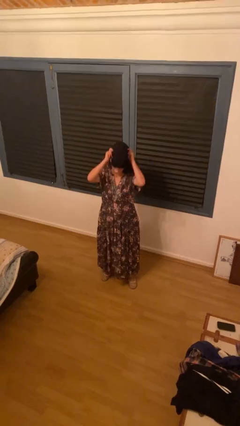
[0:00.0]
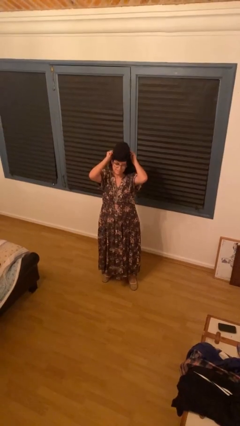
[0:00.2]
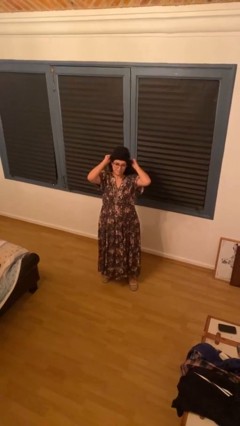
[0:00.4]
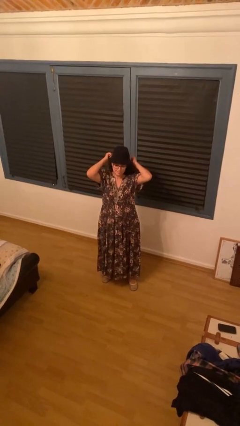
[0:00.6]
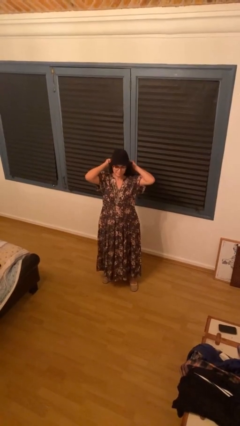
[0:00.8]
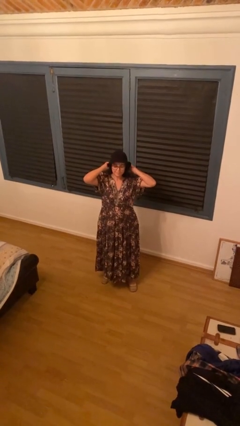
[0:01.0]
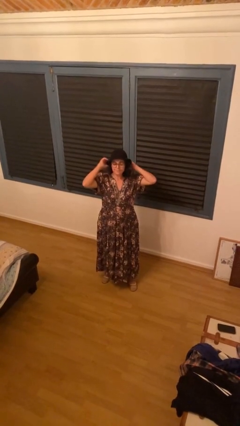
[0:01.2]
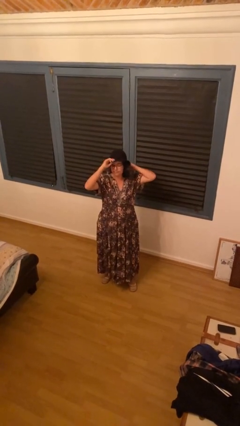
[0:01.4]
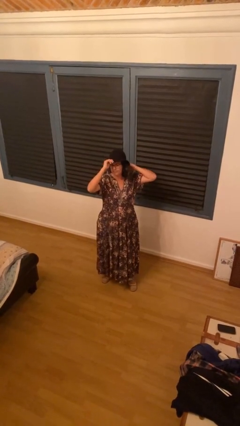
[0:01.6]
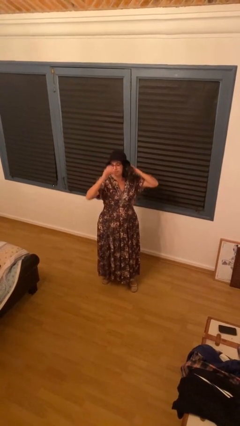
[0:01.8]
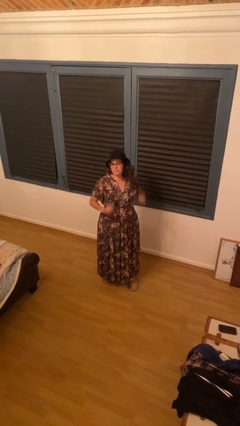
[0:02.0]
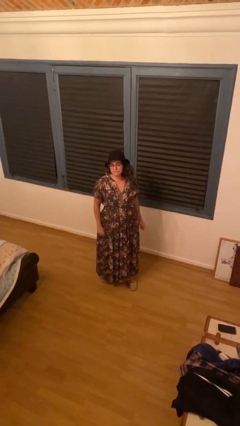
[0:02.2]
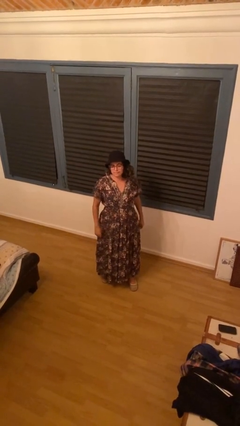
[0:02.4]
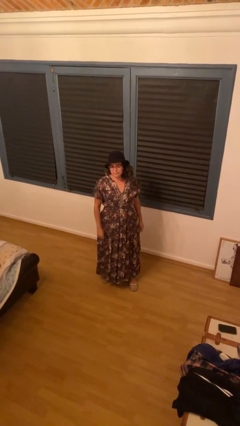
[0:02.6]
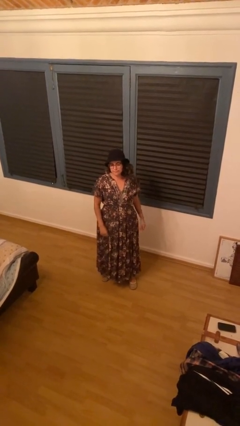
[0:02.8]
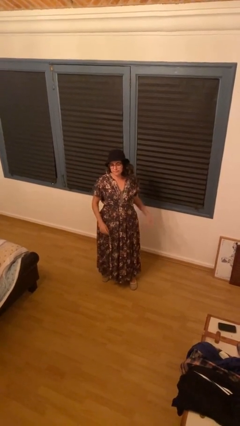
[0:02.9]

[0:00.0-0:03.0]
person puts on hat

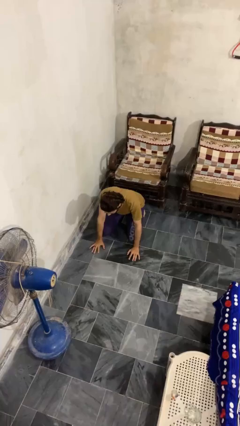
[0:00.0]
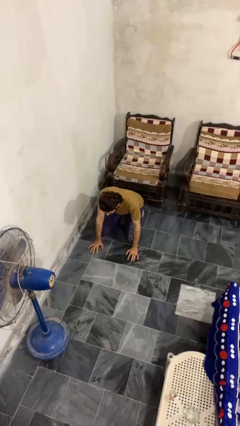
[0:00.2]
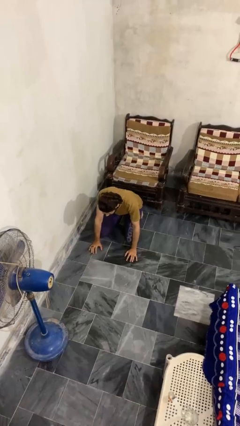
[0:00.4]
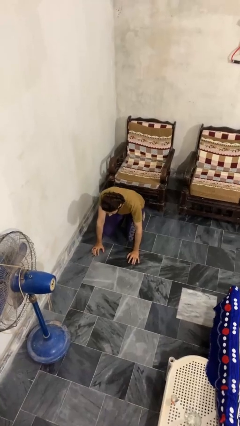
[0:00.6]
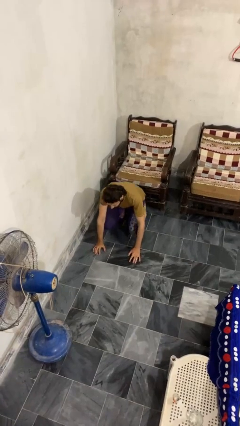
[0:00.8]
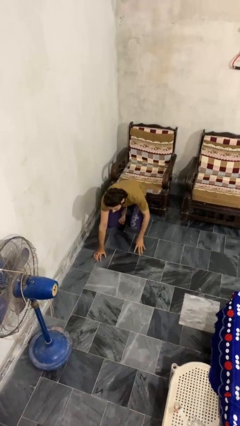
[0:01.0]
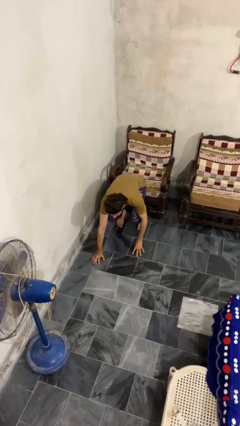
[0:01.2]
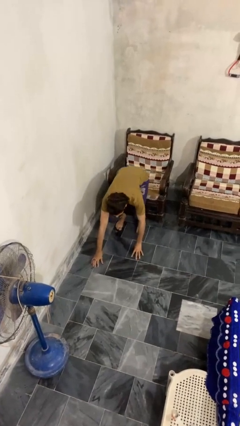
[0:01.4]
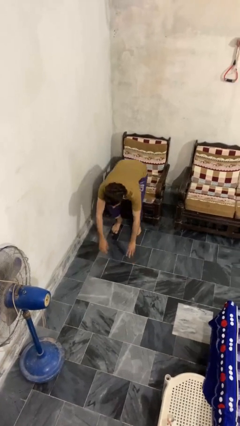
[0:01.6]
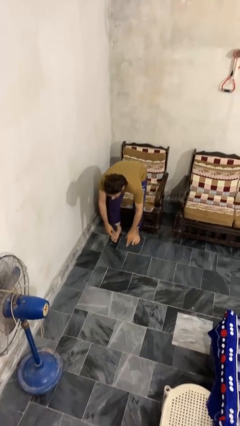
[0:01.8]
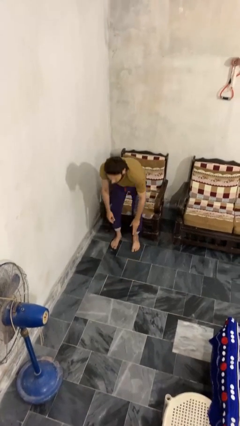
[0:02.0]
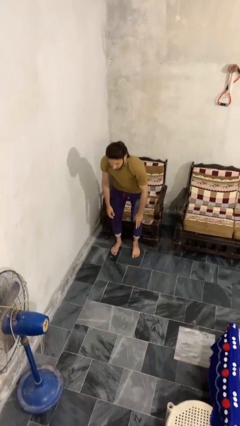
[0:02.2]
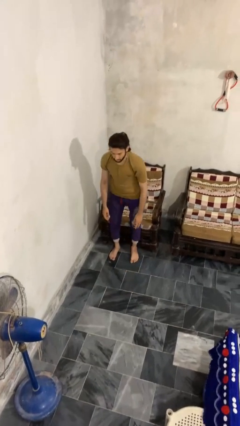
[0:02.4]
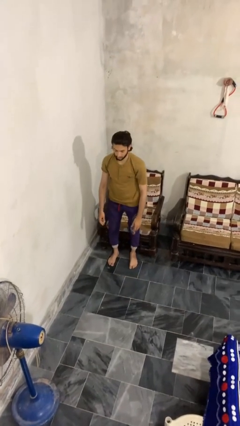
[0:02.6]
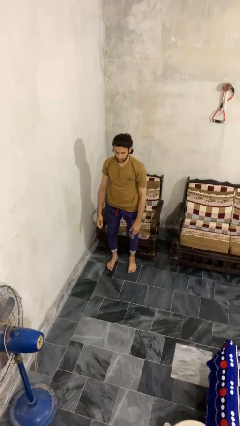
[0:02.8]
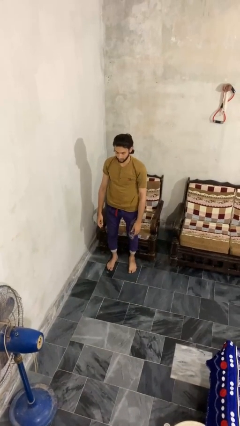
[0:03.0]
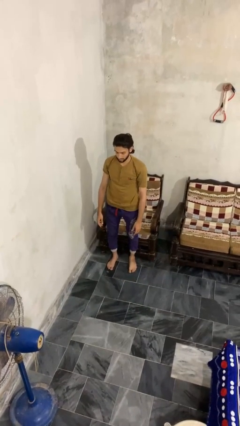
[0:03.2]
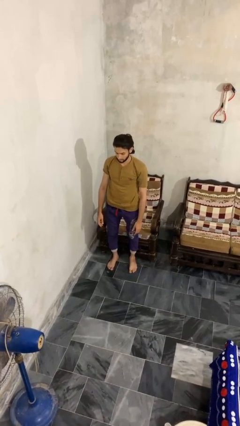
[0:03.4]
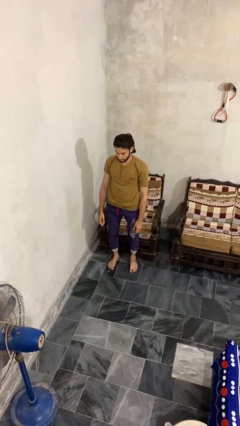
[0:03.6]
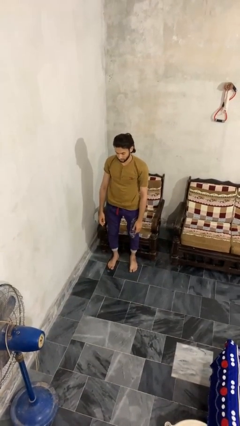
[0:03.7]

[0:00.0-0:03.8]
person stands up from floor

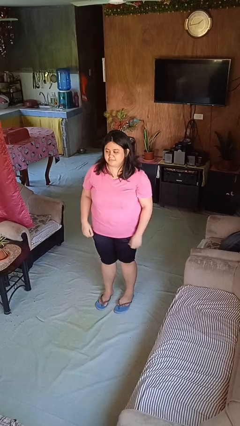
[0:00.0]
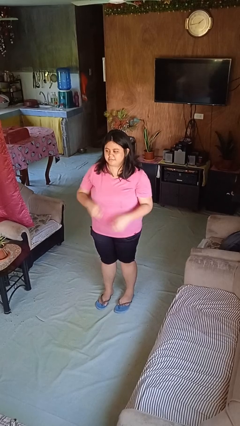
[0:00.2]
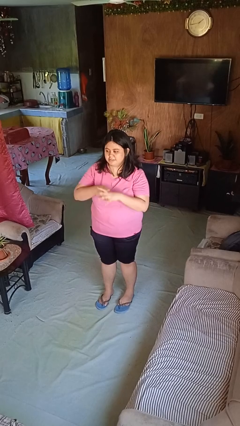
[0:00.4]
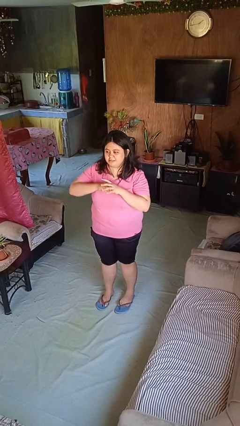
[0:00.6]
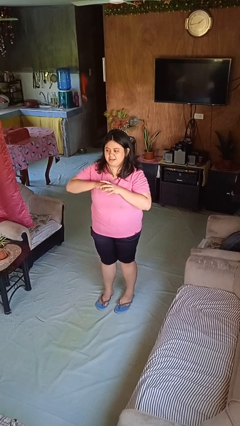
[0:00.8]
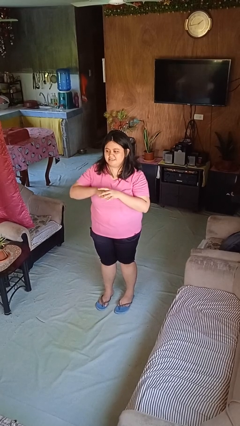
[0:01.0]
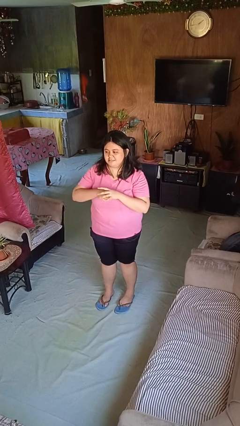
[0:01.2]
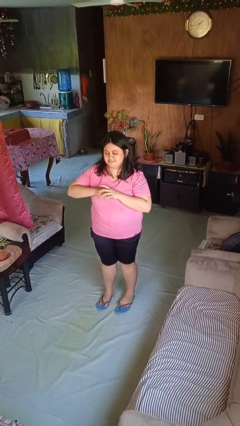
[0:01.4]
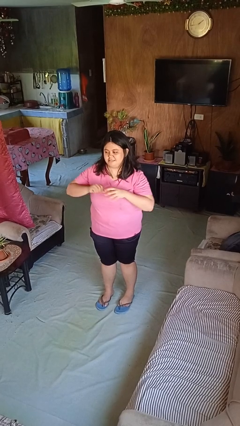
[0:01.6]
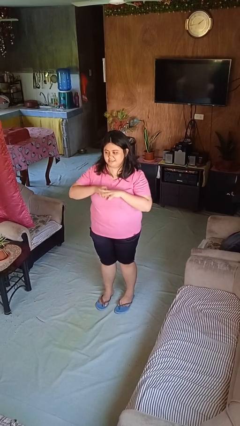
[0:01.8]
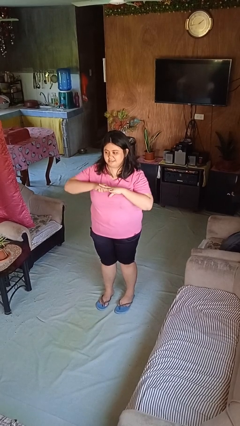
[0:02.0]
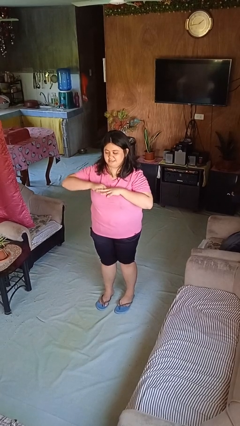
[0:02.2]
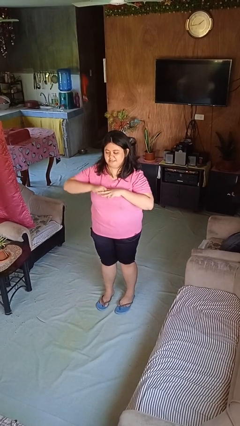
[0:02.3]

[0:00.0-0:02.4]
person cracks knuckles

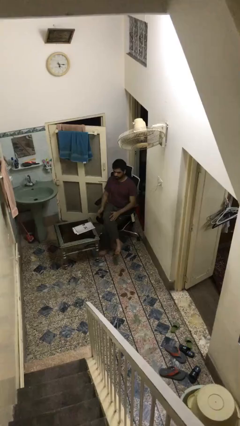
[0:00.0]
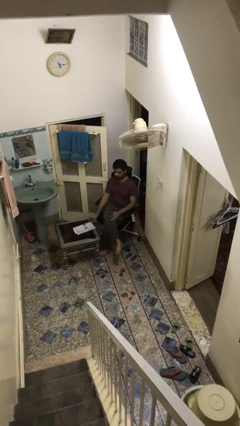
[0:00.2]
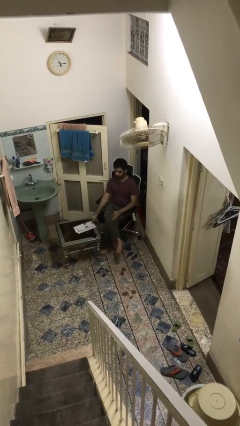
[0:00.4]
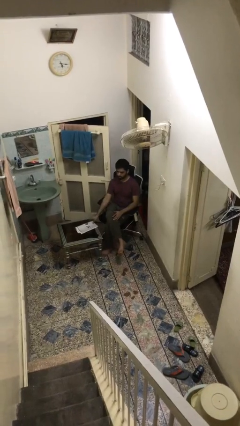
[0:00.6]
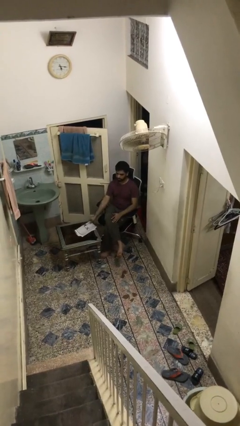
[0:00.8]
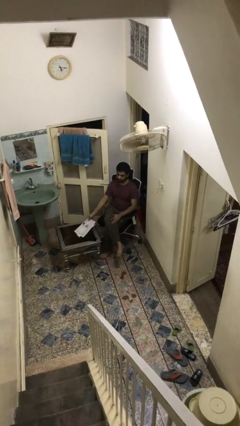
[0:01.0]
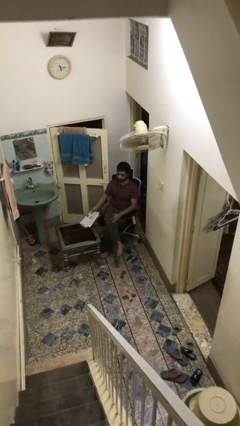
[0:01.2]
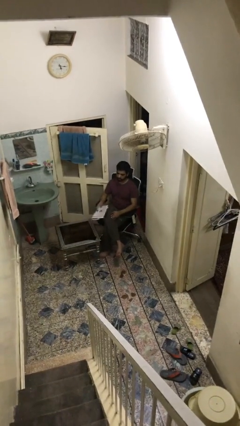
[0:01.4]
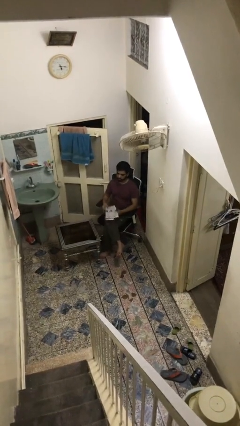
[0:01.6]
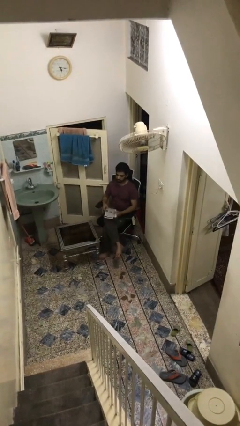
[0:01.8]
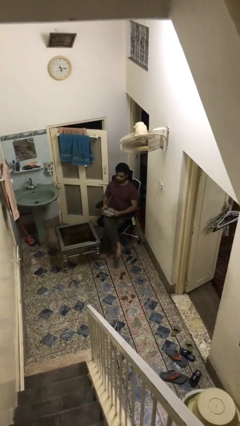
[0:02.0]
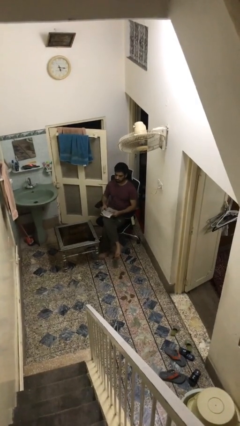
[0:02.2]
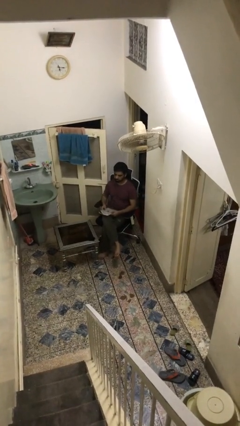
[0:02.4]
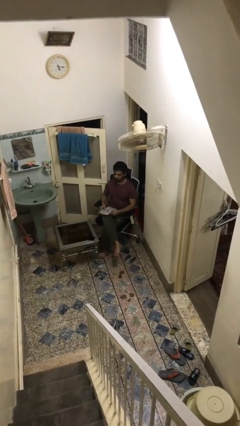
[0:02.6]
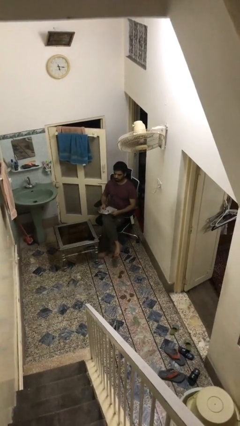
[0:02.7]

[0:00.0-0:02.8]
person picks up object from table

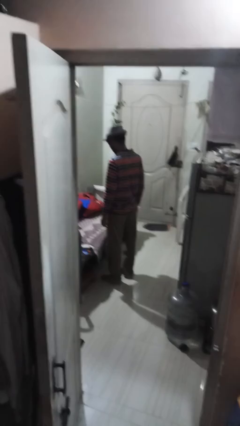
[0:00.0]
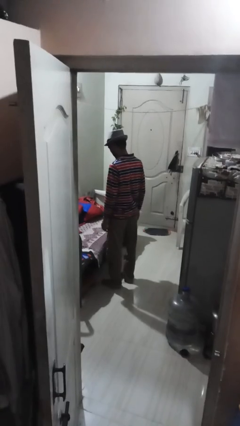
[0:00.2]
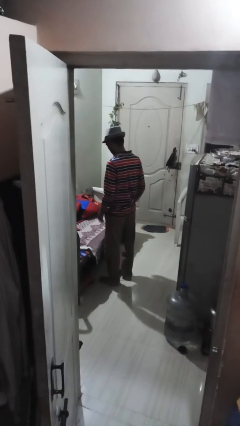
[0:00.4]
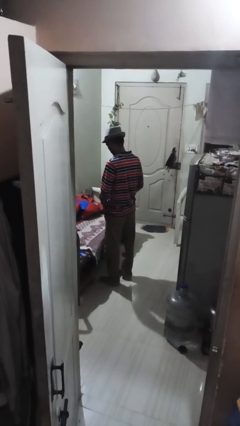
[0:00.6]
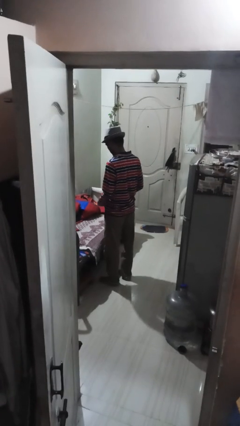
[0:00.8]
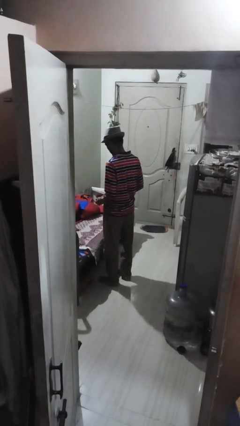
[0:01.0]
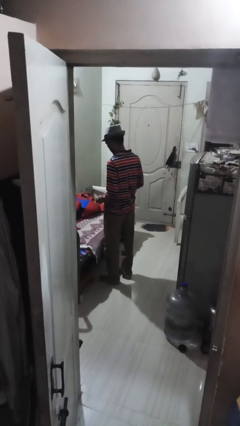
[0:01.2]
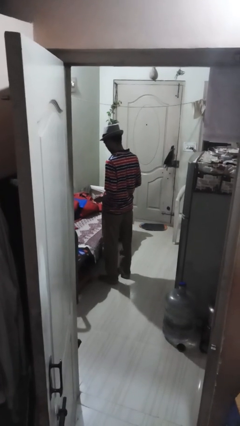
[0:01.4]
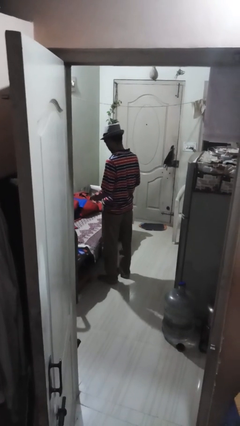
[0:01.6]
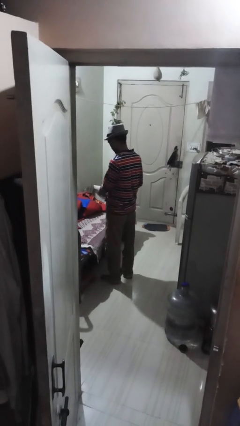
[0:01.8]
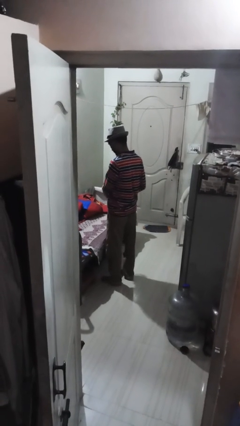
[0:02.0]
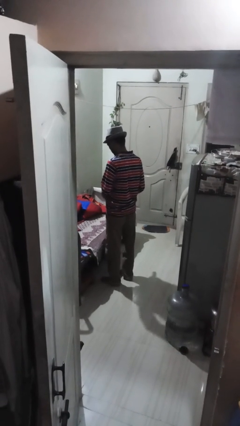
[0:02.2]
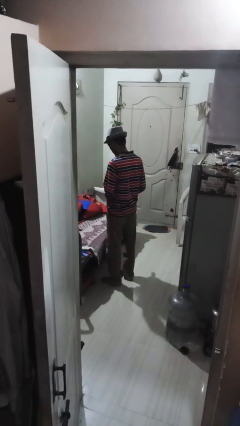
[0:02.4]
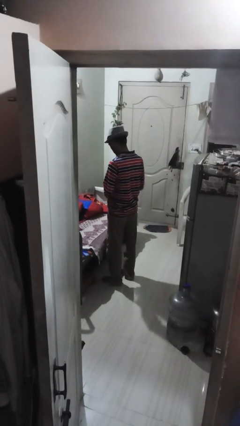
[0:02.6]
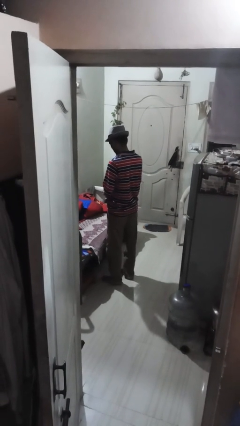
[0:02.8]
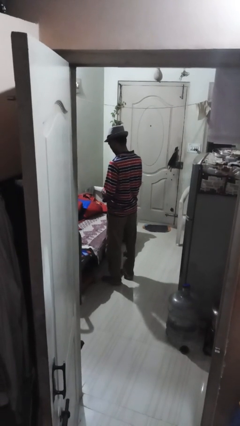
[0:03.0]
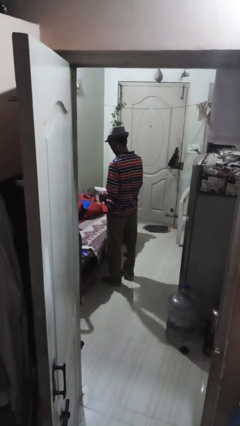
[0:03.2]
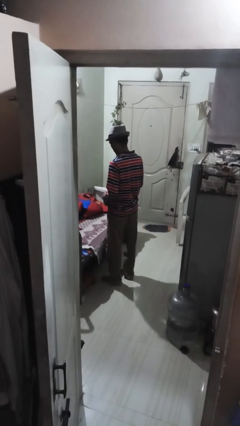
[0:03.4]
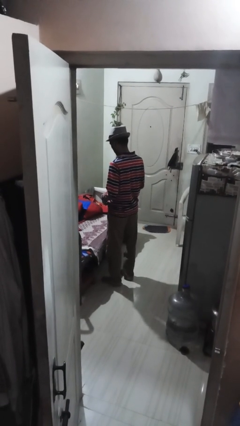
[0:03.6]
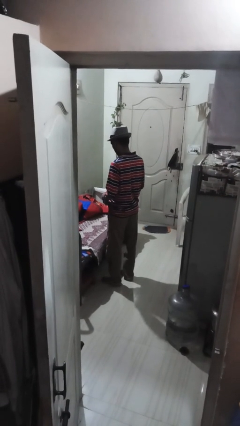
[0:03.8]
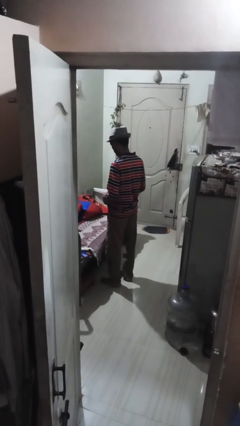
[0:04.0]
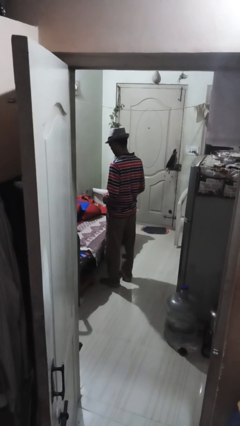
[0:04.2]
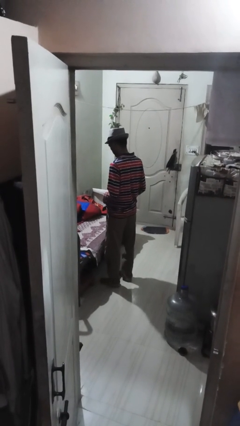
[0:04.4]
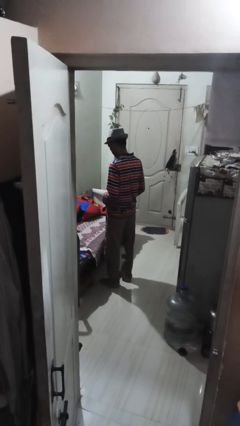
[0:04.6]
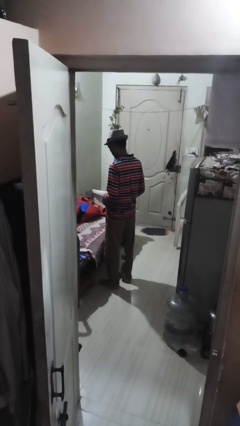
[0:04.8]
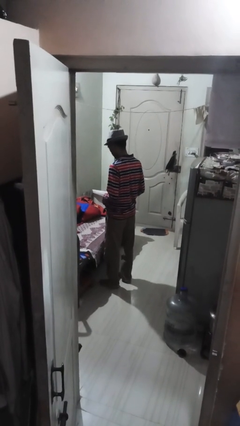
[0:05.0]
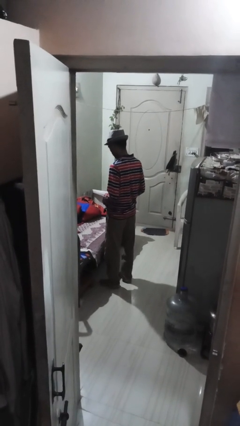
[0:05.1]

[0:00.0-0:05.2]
person puts on belt

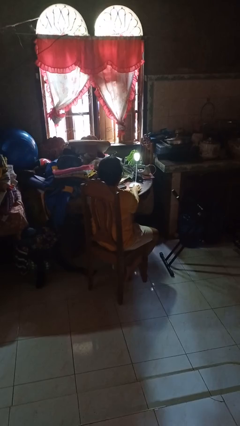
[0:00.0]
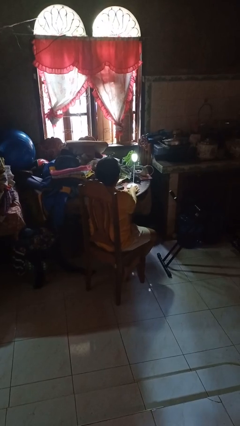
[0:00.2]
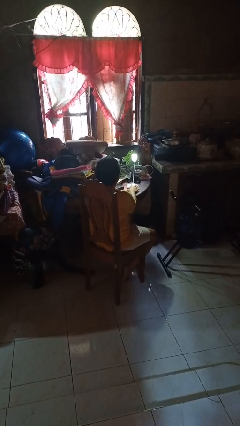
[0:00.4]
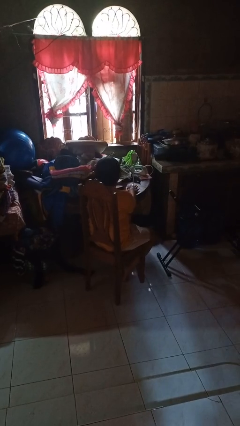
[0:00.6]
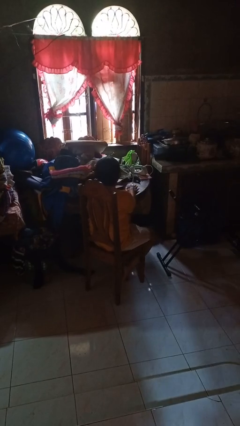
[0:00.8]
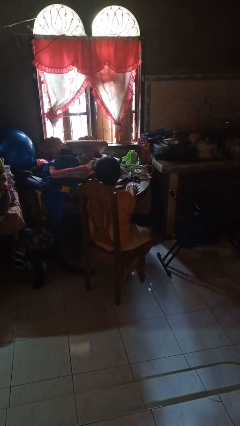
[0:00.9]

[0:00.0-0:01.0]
person turns off lamp
